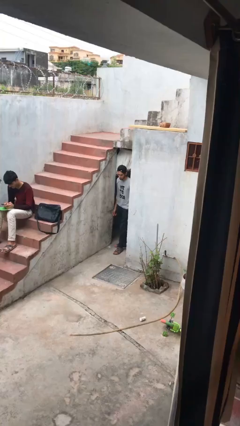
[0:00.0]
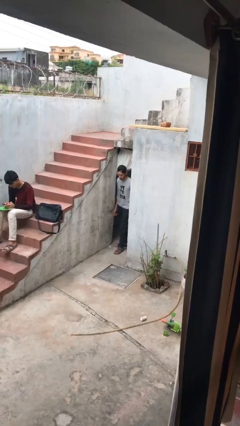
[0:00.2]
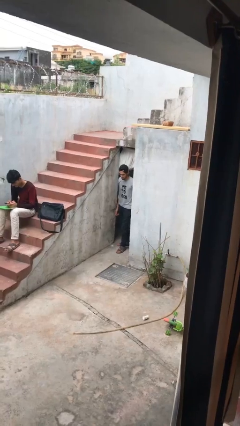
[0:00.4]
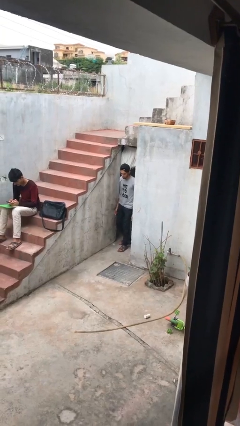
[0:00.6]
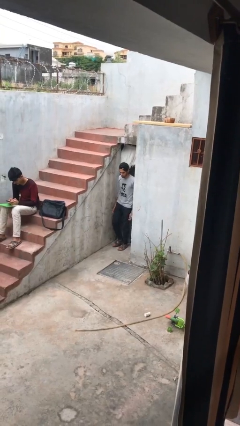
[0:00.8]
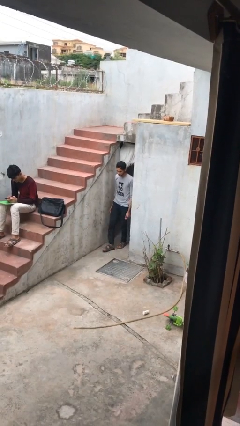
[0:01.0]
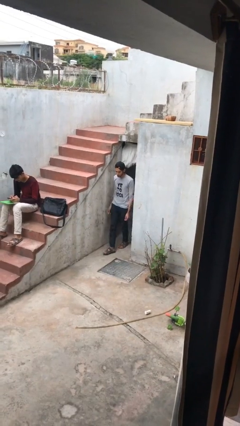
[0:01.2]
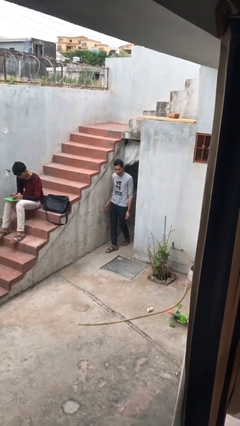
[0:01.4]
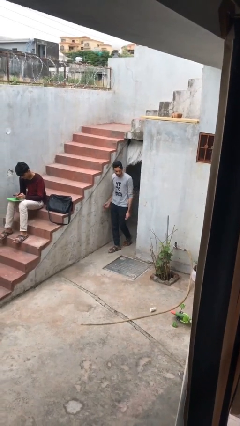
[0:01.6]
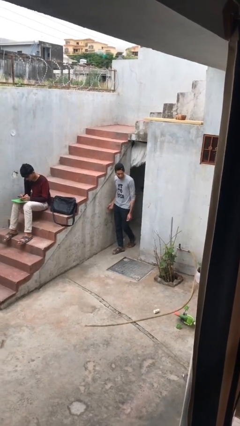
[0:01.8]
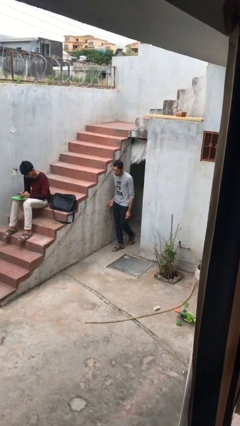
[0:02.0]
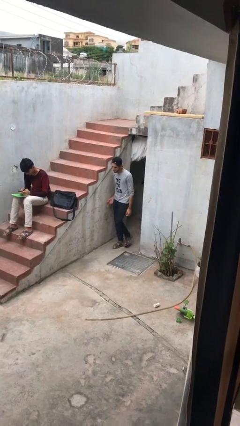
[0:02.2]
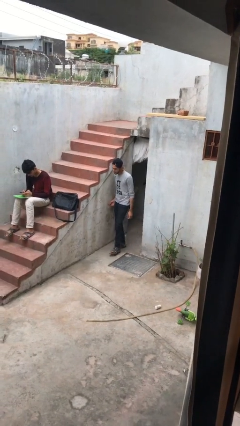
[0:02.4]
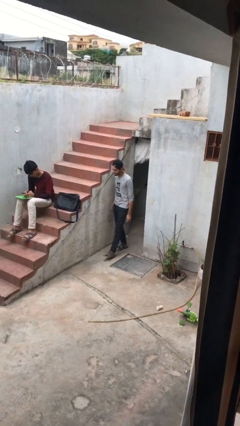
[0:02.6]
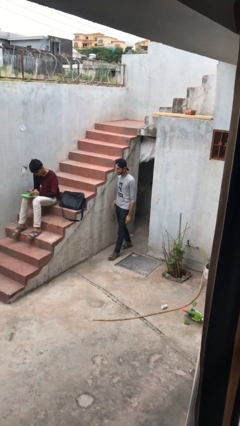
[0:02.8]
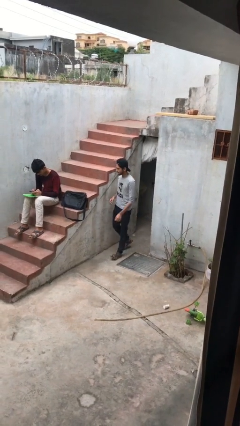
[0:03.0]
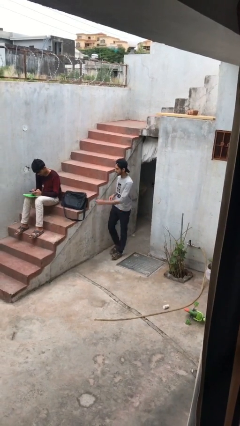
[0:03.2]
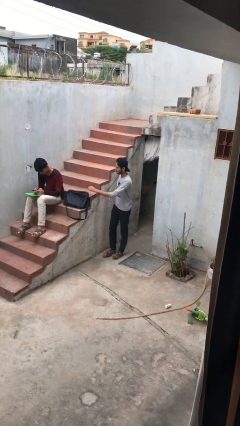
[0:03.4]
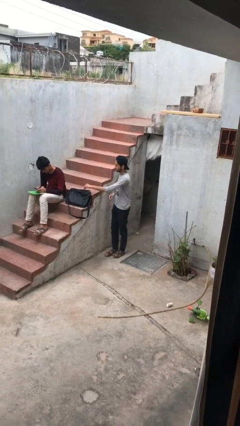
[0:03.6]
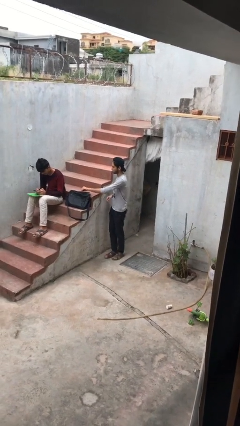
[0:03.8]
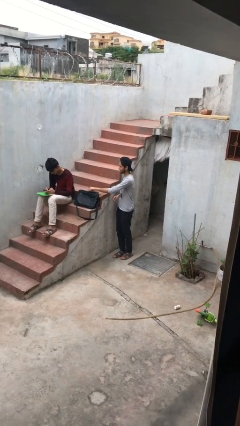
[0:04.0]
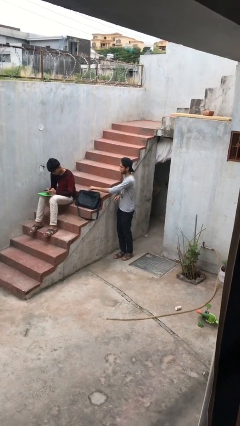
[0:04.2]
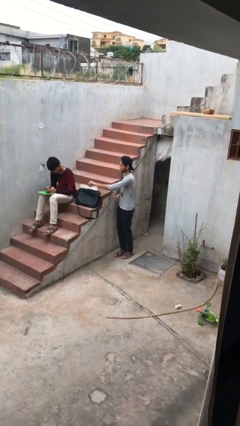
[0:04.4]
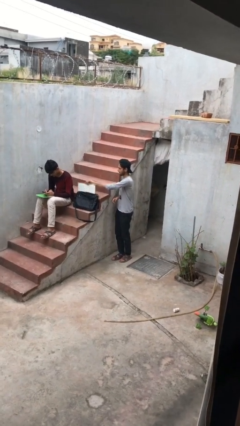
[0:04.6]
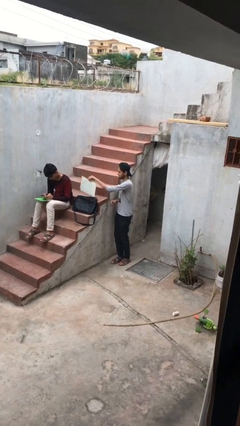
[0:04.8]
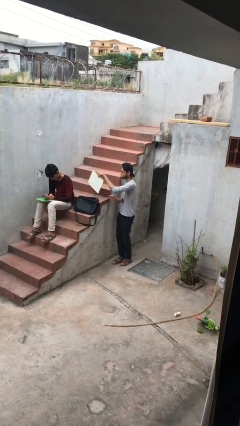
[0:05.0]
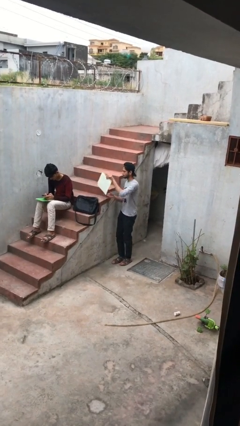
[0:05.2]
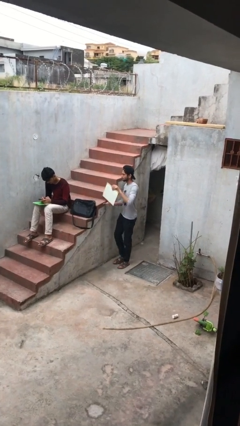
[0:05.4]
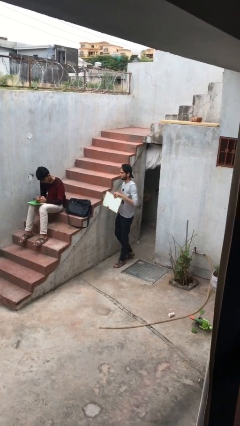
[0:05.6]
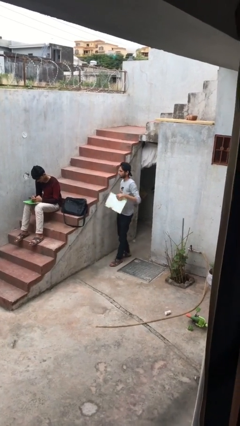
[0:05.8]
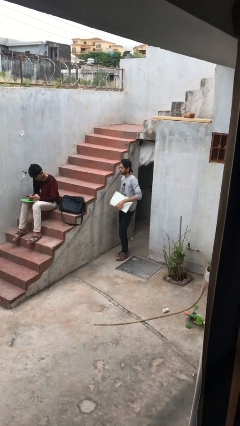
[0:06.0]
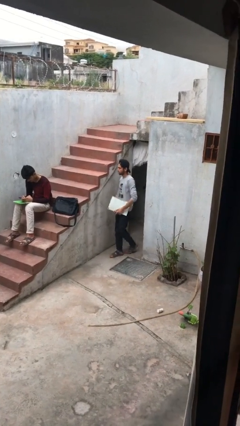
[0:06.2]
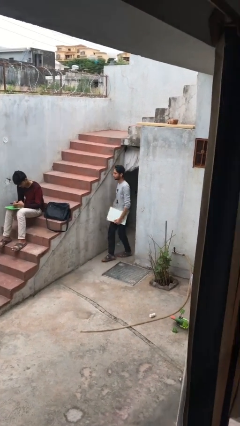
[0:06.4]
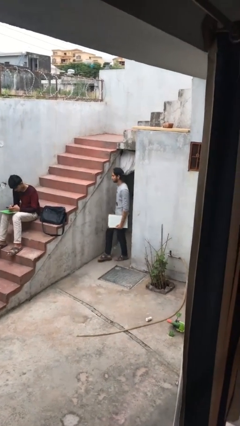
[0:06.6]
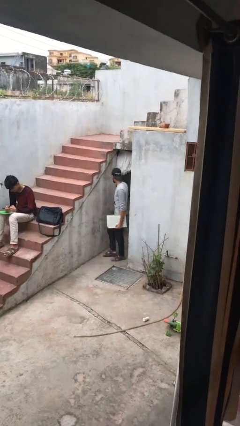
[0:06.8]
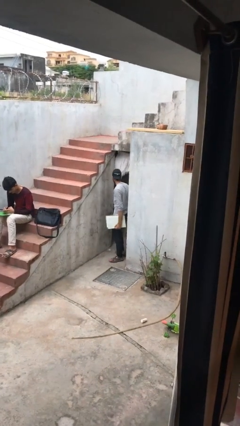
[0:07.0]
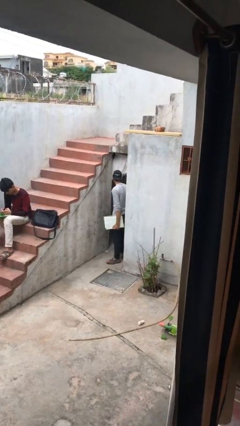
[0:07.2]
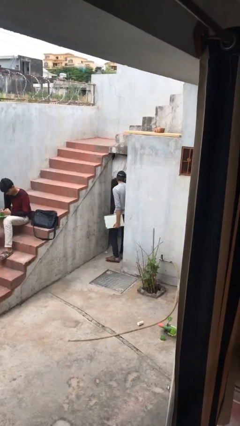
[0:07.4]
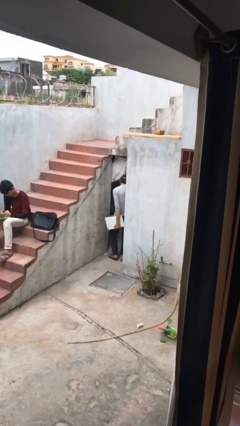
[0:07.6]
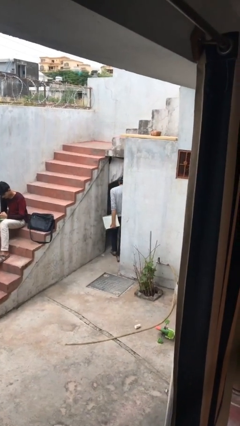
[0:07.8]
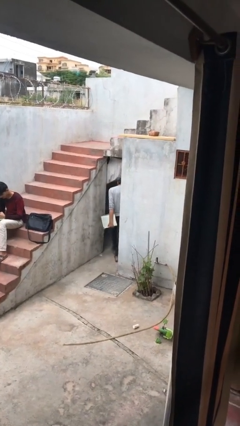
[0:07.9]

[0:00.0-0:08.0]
person steals object from person

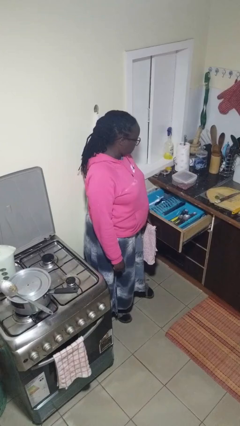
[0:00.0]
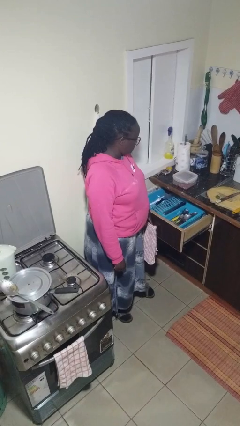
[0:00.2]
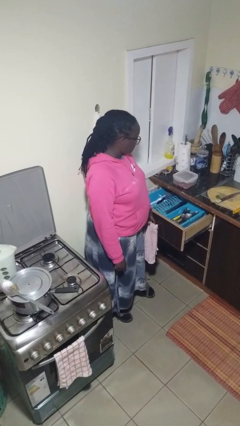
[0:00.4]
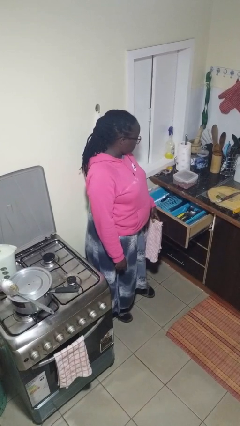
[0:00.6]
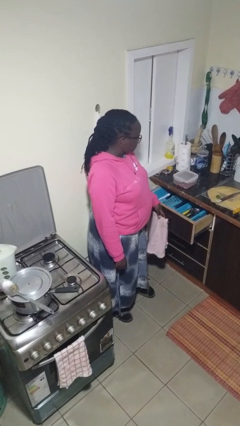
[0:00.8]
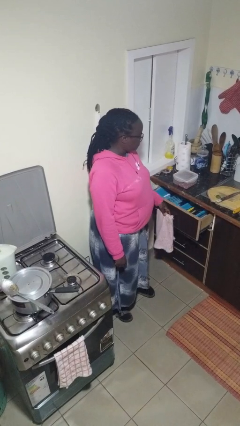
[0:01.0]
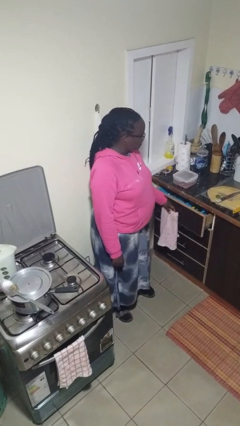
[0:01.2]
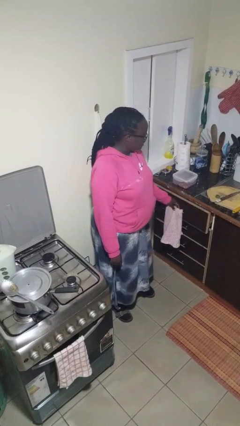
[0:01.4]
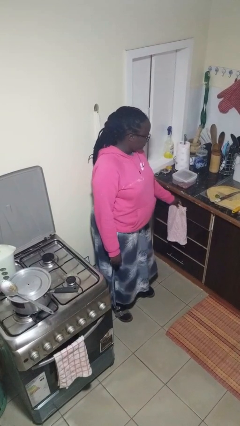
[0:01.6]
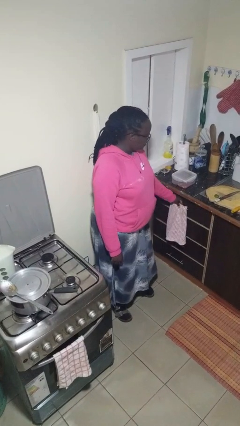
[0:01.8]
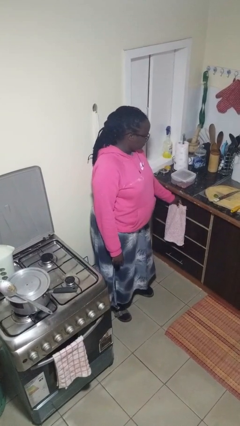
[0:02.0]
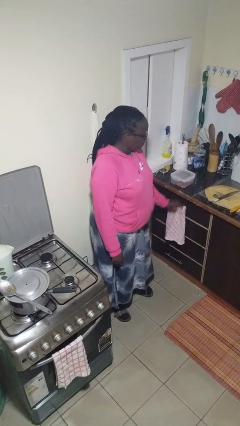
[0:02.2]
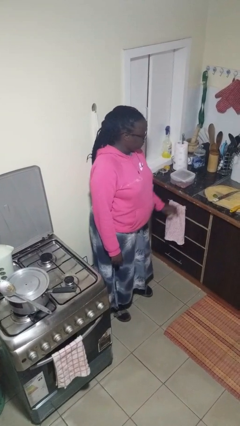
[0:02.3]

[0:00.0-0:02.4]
person closes kitchen drawer

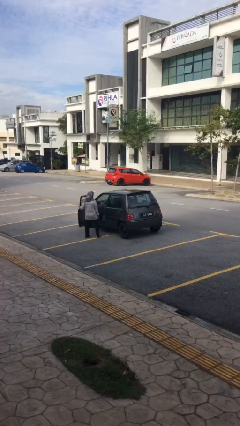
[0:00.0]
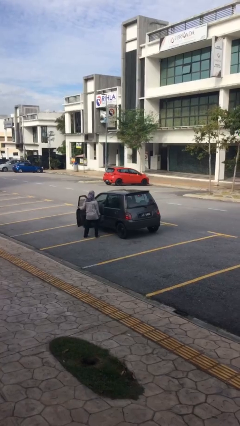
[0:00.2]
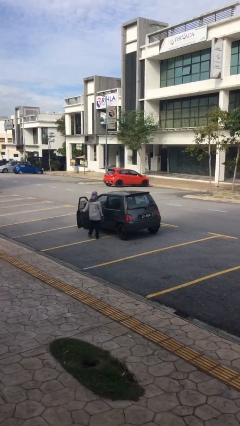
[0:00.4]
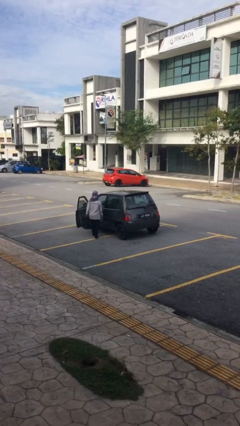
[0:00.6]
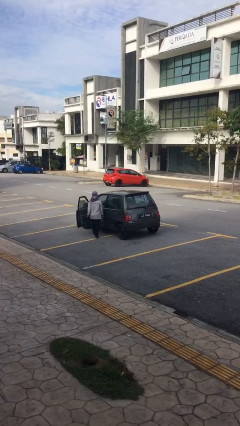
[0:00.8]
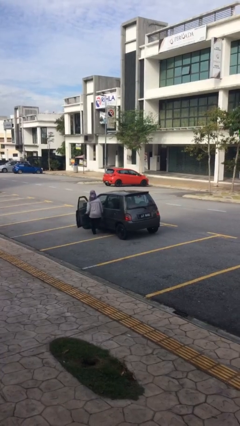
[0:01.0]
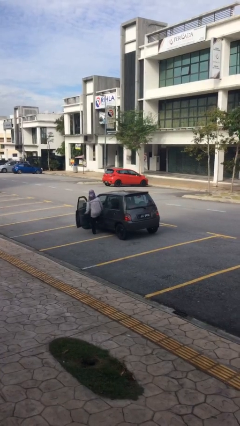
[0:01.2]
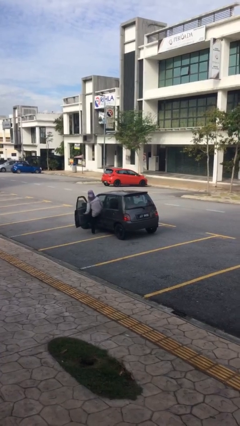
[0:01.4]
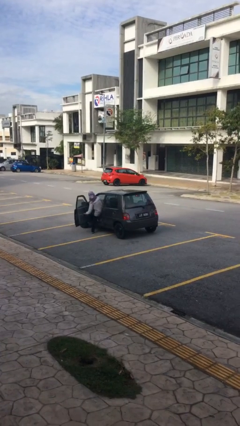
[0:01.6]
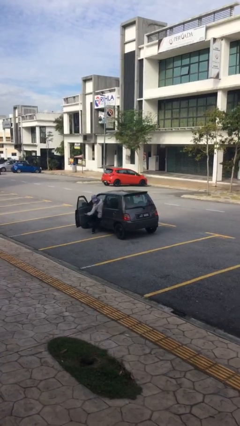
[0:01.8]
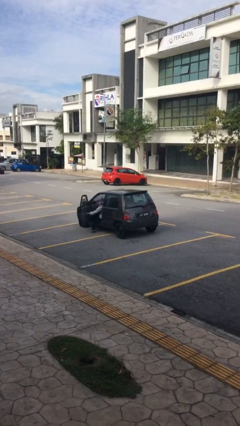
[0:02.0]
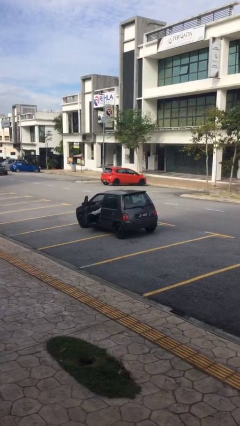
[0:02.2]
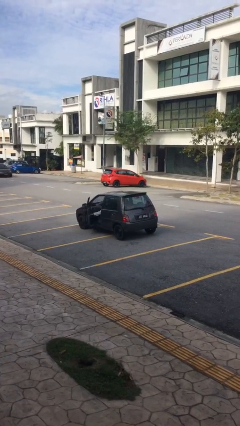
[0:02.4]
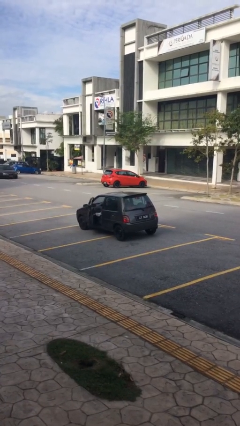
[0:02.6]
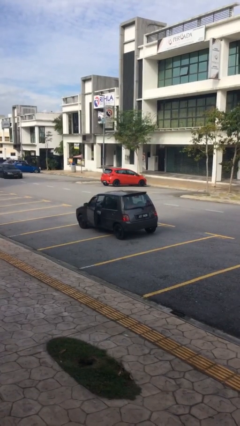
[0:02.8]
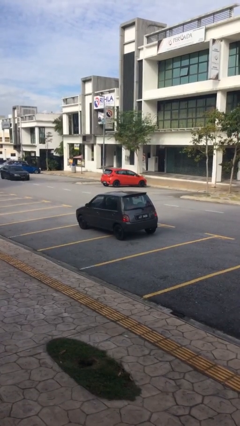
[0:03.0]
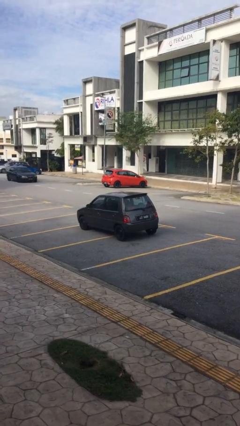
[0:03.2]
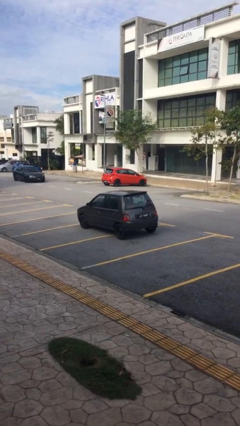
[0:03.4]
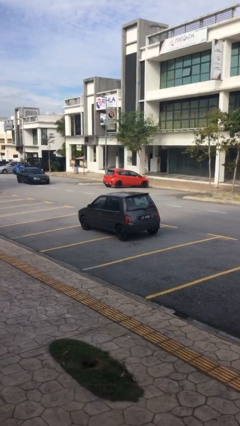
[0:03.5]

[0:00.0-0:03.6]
car picks up person

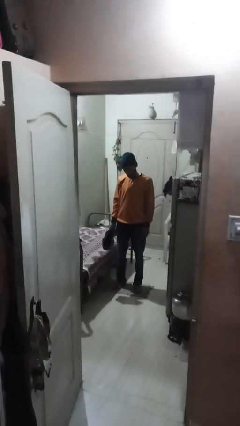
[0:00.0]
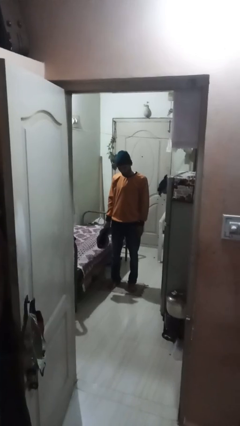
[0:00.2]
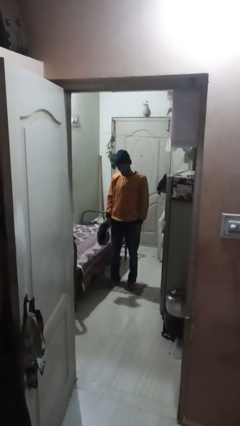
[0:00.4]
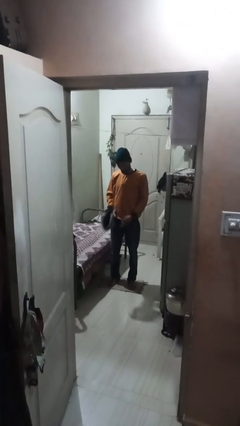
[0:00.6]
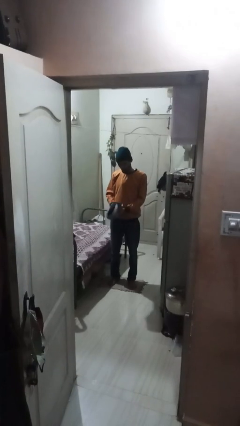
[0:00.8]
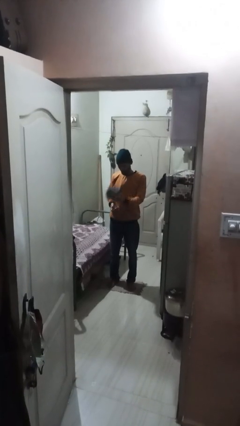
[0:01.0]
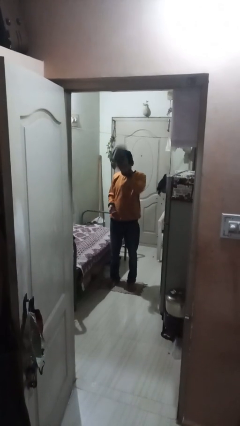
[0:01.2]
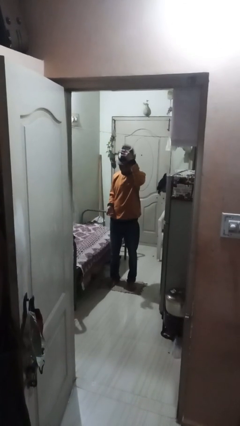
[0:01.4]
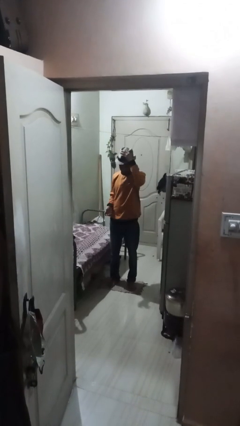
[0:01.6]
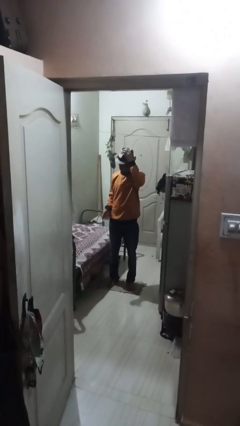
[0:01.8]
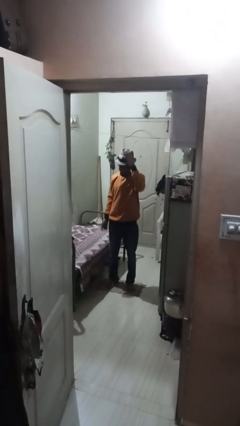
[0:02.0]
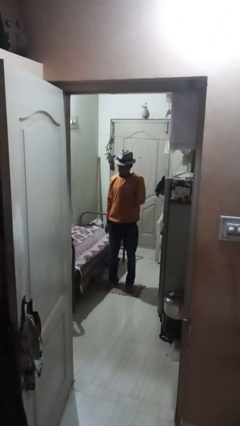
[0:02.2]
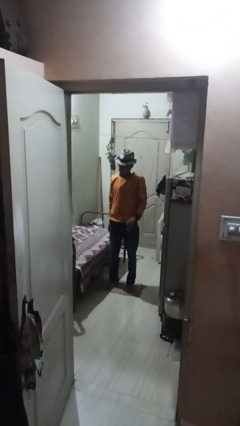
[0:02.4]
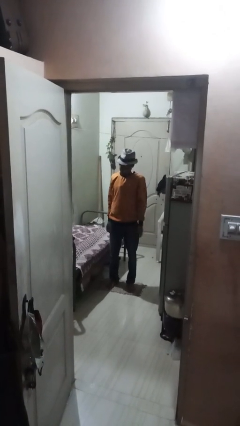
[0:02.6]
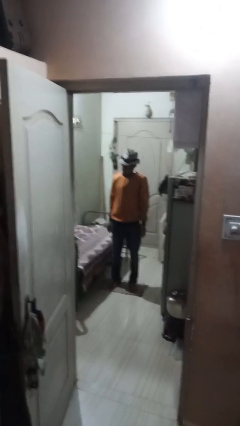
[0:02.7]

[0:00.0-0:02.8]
person puts on hat

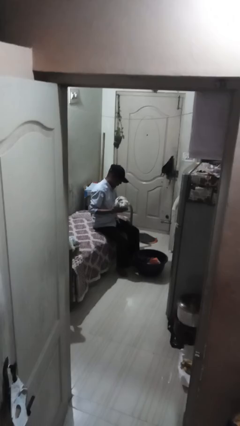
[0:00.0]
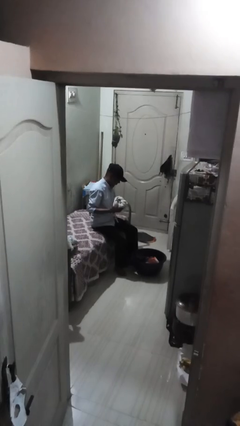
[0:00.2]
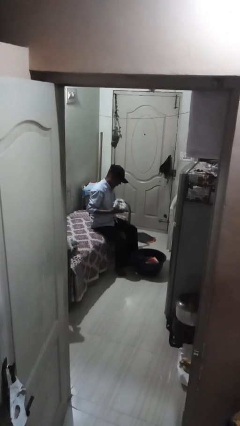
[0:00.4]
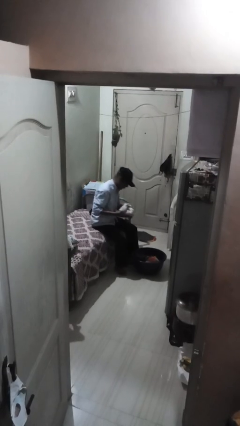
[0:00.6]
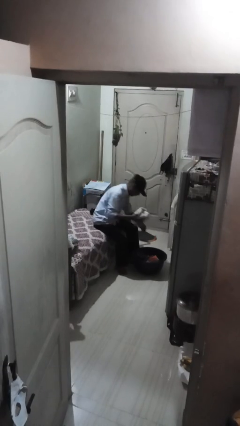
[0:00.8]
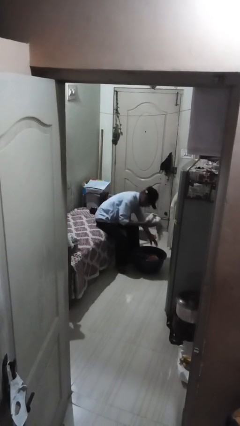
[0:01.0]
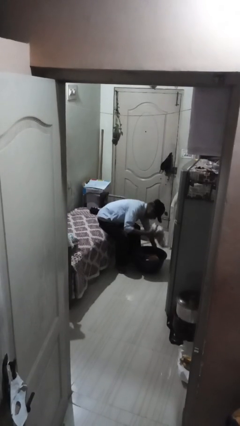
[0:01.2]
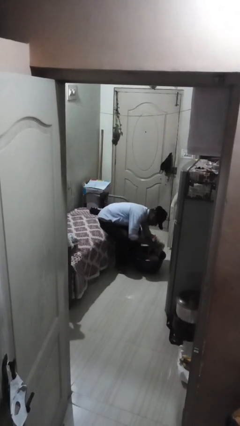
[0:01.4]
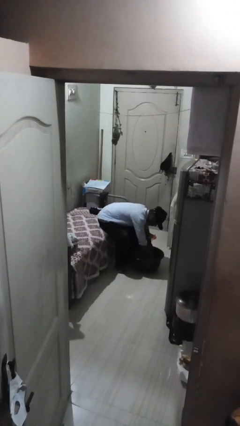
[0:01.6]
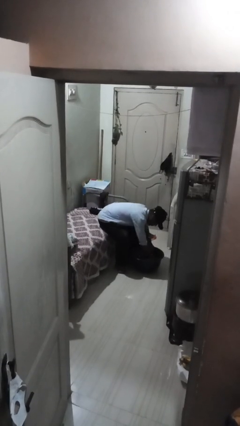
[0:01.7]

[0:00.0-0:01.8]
person puts object into basket
